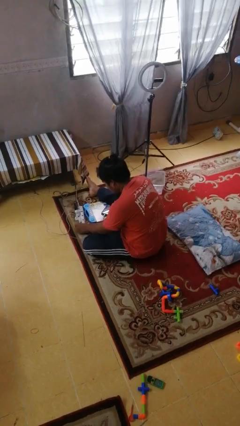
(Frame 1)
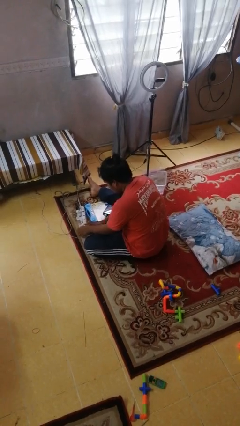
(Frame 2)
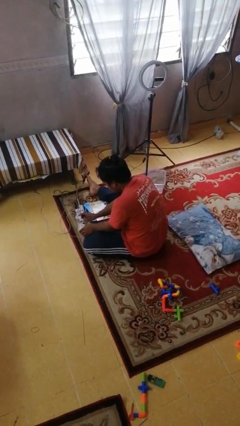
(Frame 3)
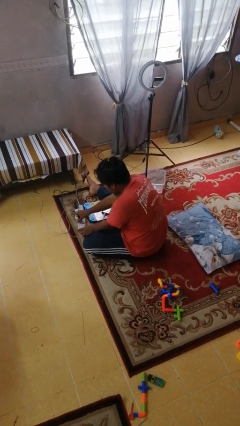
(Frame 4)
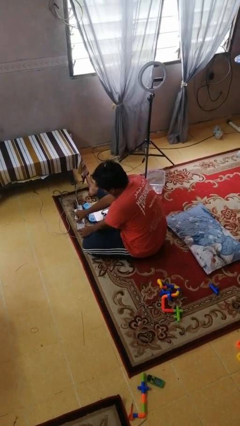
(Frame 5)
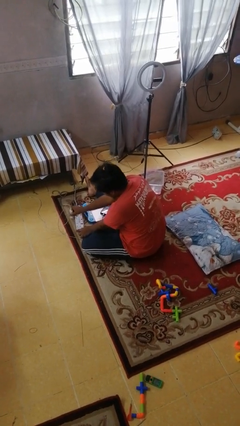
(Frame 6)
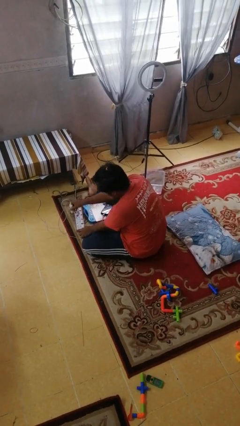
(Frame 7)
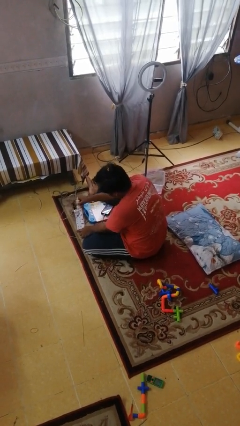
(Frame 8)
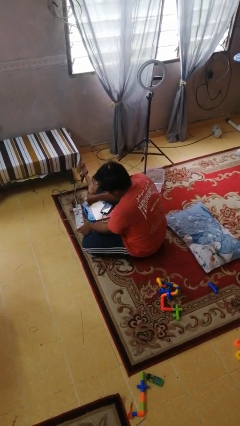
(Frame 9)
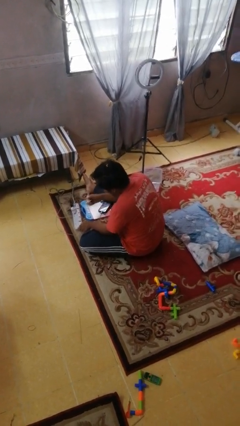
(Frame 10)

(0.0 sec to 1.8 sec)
person unplugs from electrical socket

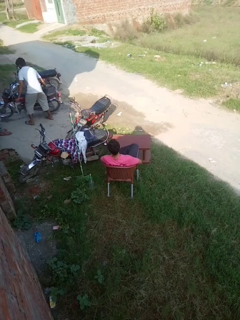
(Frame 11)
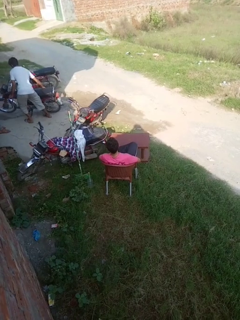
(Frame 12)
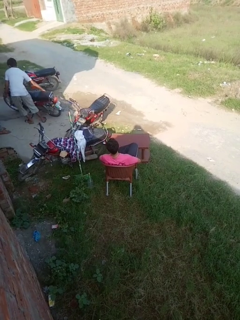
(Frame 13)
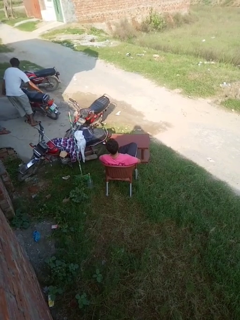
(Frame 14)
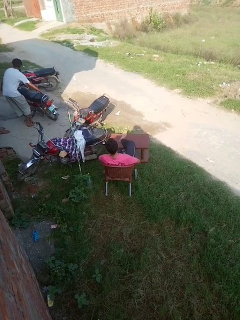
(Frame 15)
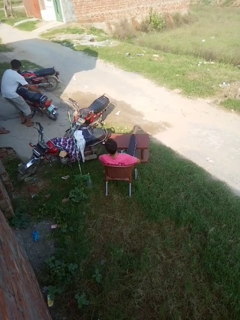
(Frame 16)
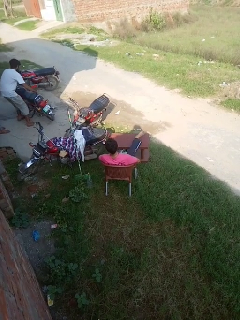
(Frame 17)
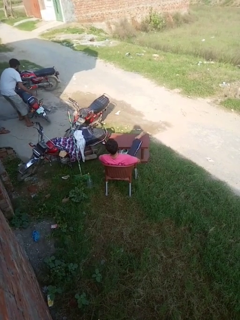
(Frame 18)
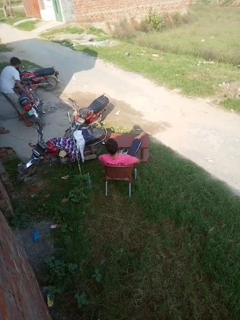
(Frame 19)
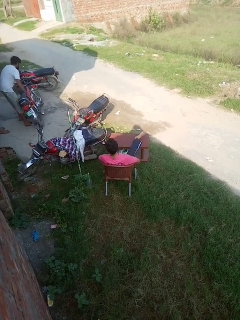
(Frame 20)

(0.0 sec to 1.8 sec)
person puts feet up

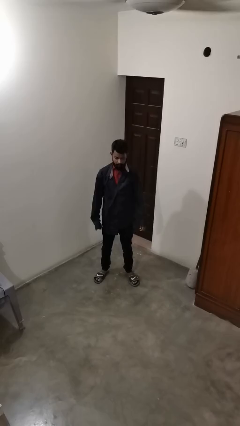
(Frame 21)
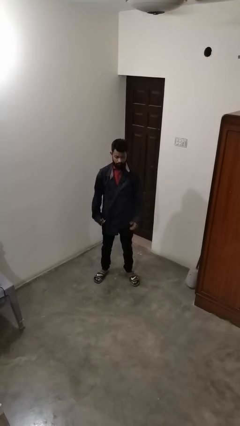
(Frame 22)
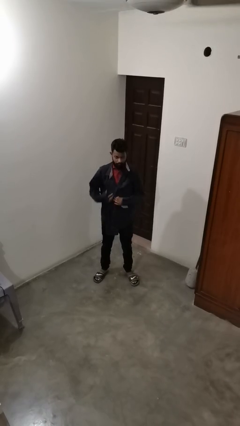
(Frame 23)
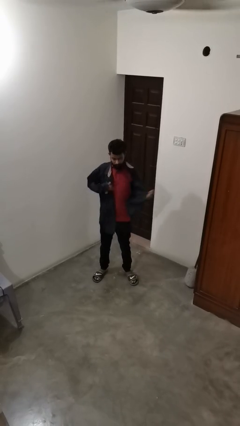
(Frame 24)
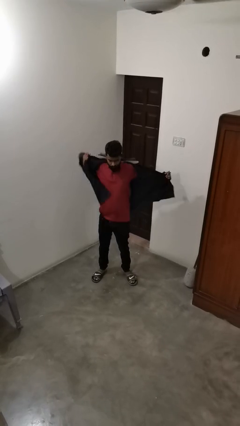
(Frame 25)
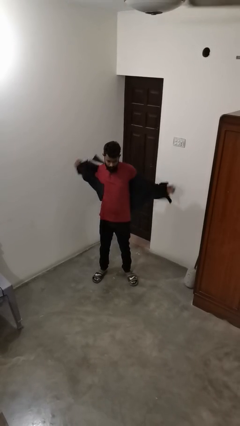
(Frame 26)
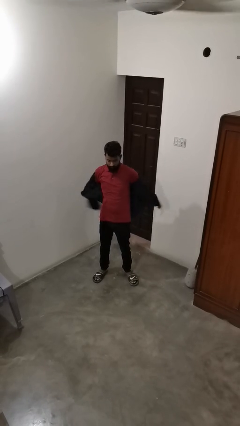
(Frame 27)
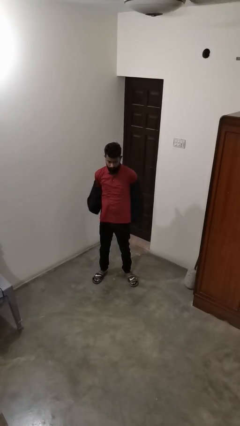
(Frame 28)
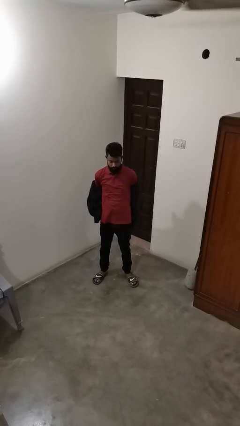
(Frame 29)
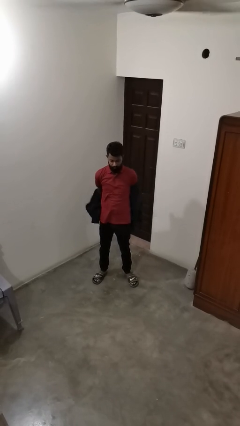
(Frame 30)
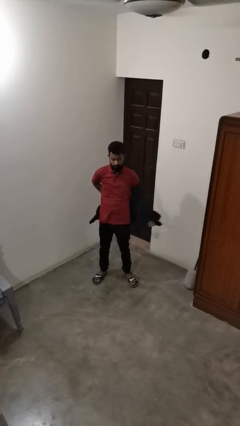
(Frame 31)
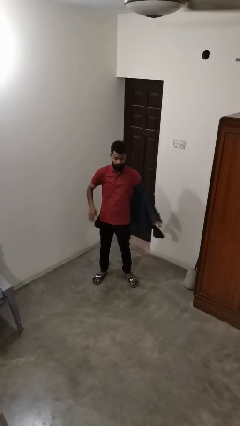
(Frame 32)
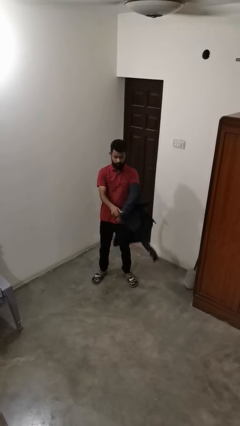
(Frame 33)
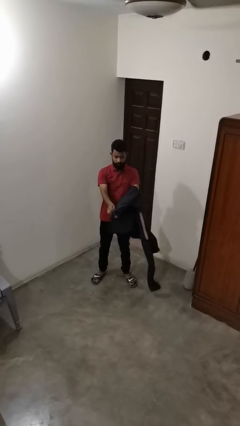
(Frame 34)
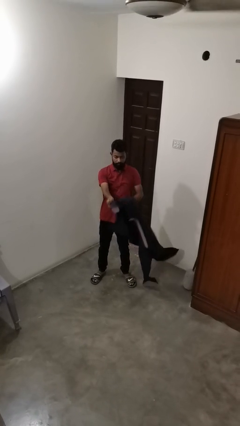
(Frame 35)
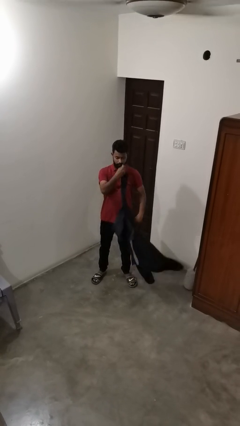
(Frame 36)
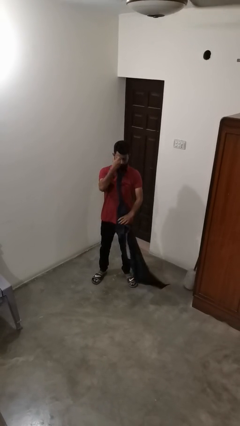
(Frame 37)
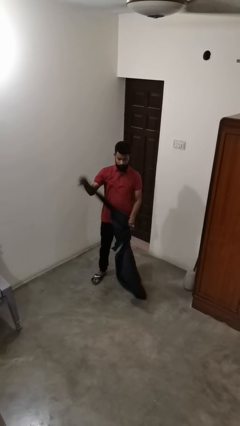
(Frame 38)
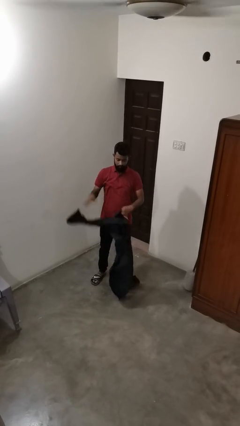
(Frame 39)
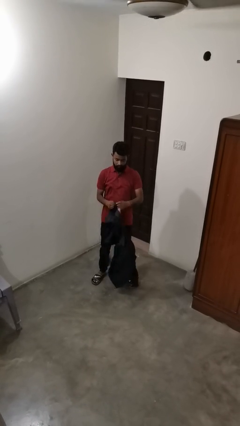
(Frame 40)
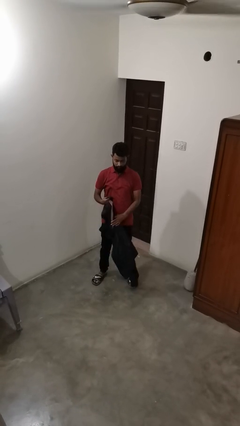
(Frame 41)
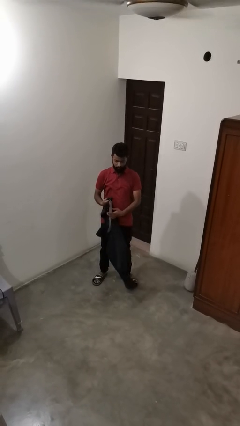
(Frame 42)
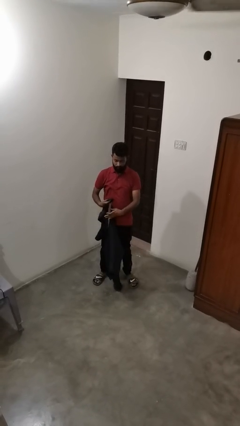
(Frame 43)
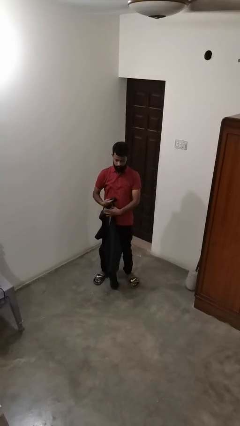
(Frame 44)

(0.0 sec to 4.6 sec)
person takes off shirt

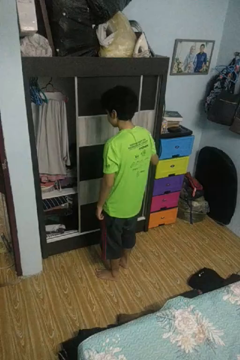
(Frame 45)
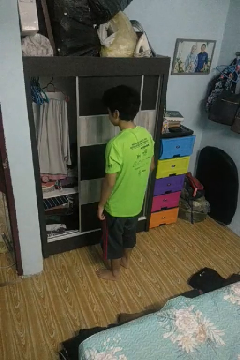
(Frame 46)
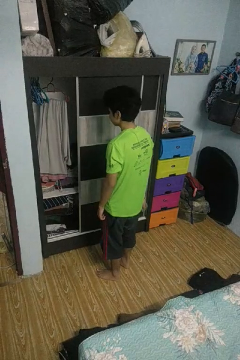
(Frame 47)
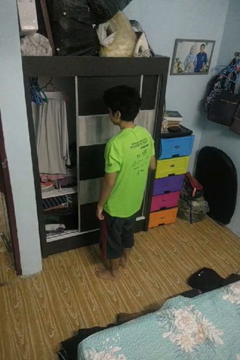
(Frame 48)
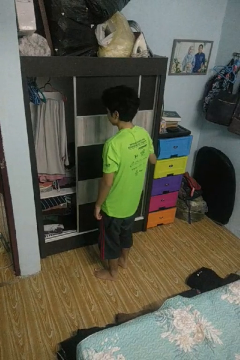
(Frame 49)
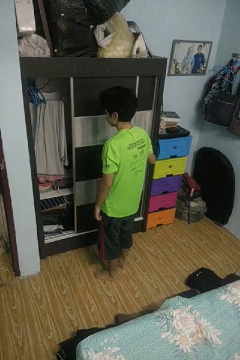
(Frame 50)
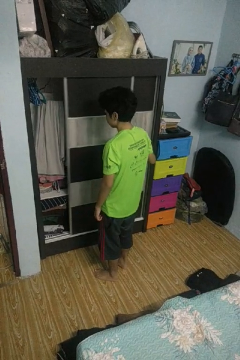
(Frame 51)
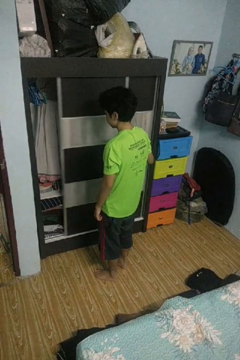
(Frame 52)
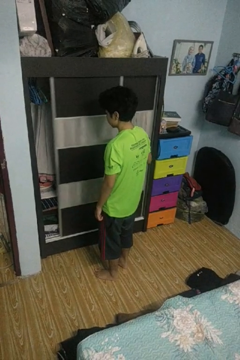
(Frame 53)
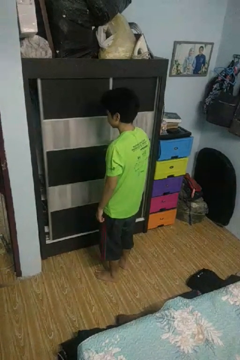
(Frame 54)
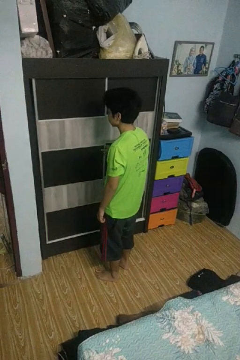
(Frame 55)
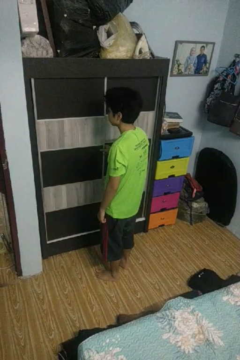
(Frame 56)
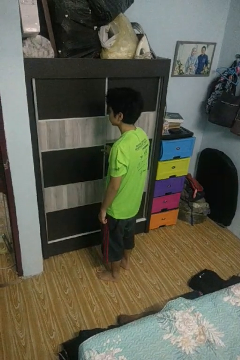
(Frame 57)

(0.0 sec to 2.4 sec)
person closes closet door

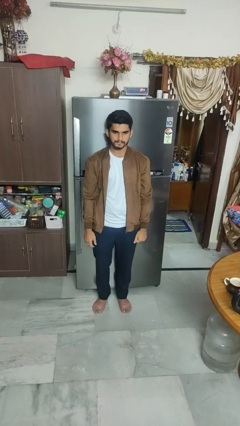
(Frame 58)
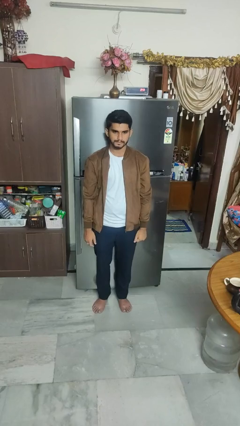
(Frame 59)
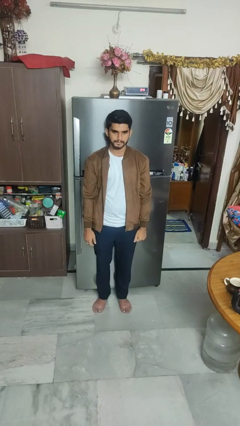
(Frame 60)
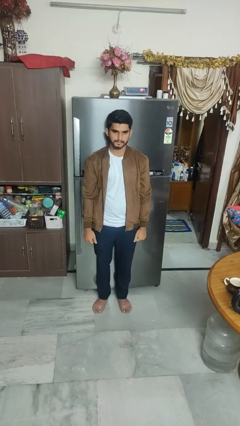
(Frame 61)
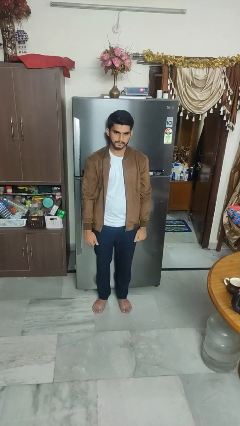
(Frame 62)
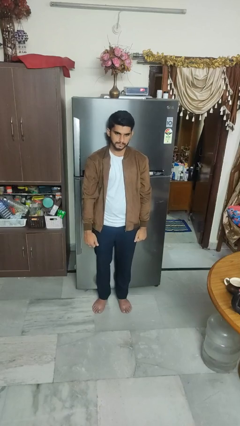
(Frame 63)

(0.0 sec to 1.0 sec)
person gestures hang loose

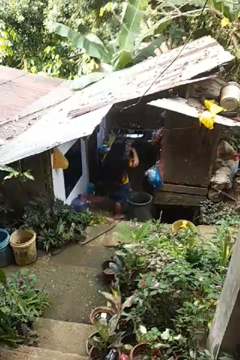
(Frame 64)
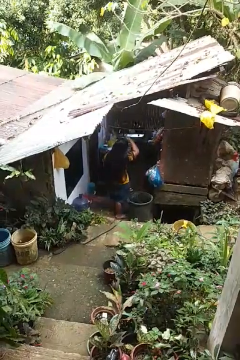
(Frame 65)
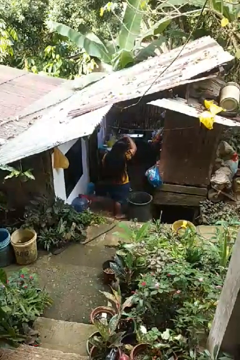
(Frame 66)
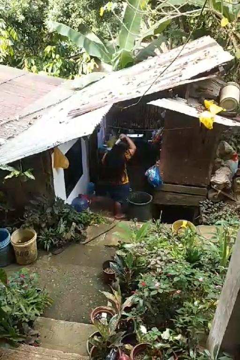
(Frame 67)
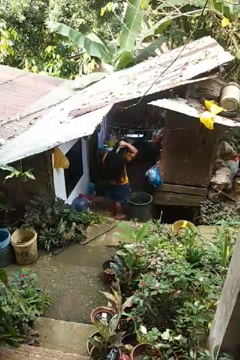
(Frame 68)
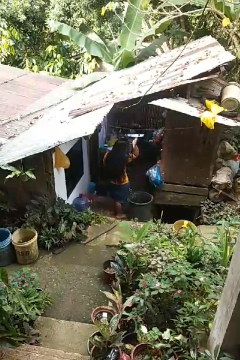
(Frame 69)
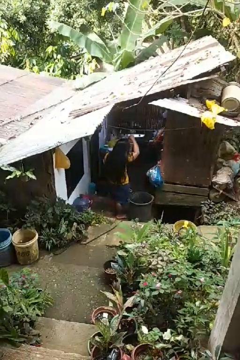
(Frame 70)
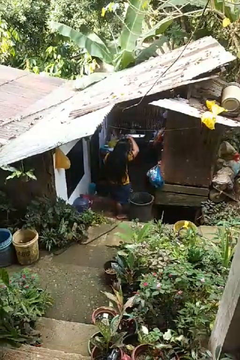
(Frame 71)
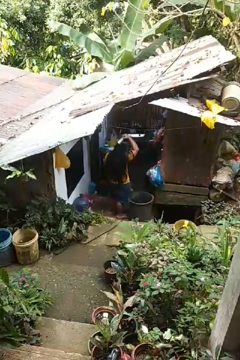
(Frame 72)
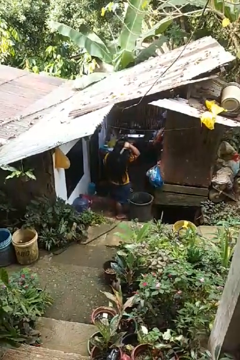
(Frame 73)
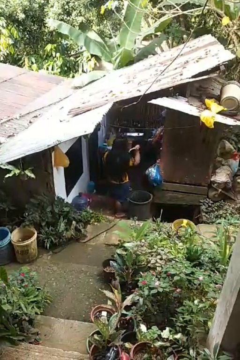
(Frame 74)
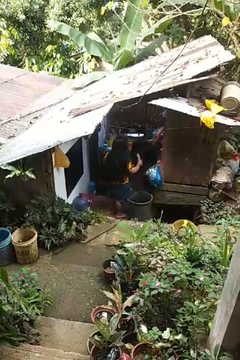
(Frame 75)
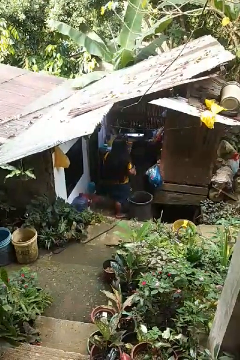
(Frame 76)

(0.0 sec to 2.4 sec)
person brushes hair

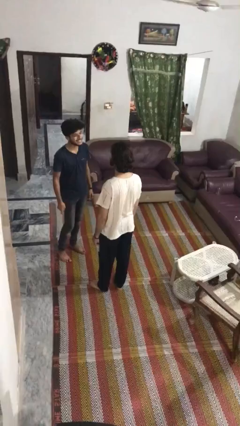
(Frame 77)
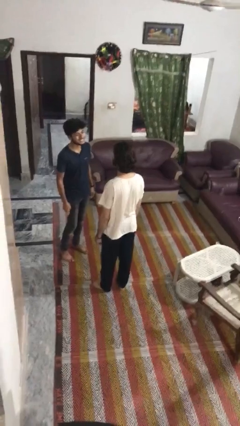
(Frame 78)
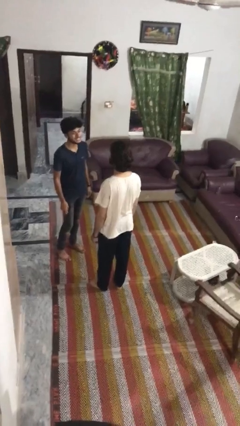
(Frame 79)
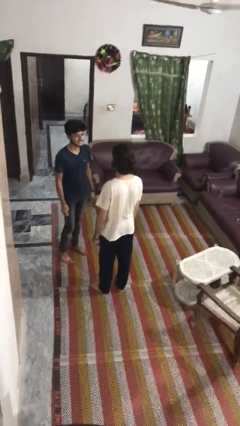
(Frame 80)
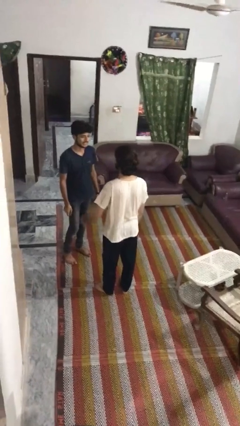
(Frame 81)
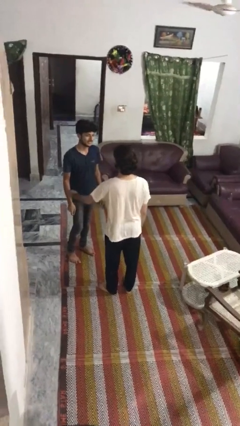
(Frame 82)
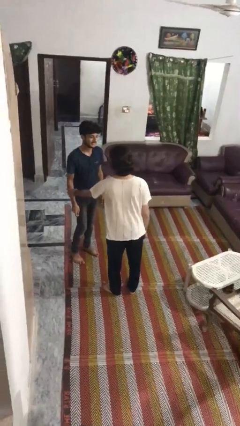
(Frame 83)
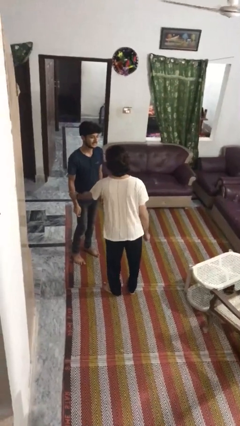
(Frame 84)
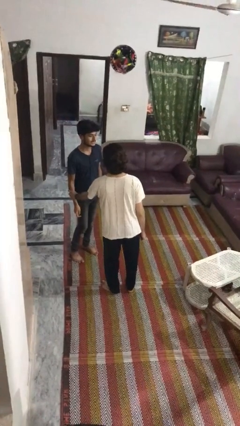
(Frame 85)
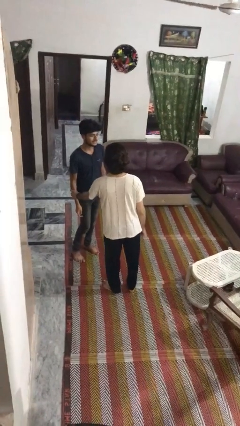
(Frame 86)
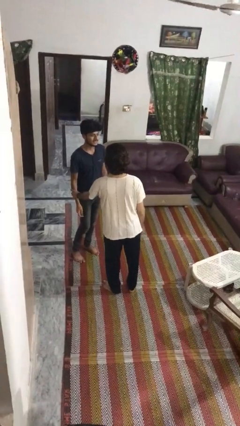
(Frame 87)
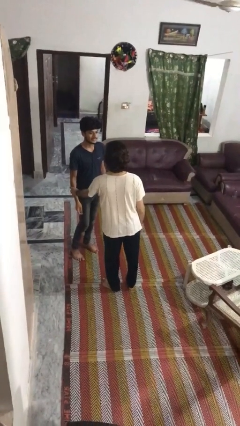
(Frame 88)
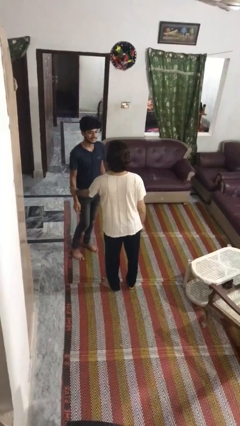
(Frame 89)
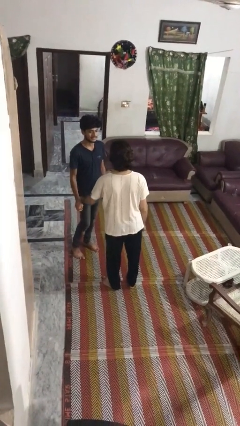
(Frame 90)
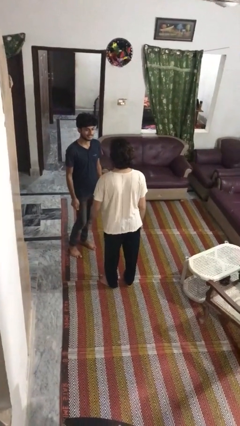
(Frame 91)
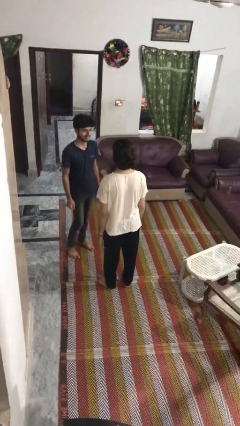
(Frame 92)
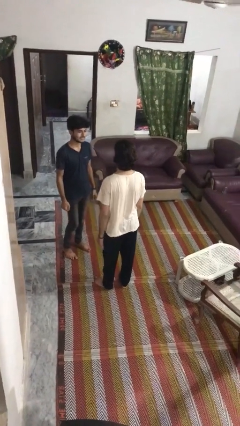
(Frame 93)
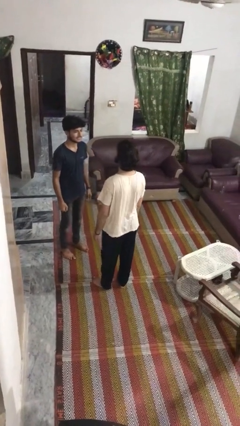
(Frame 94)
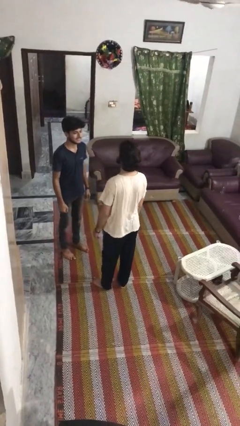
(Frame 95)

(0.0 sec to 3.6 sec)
person grabs person by forearm

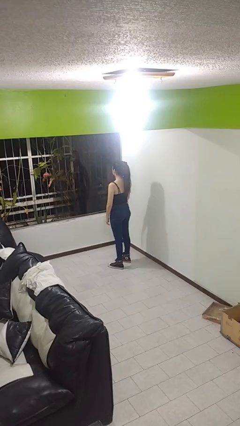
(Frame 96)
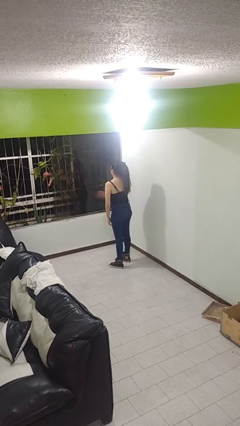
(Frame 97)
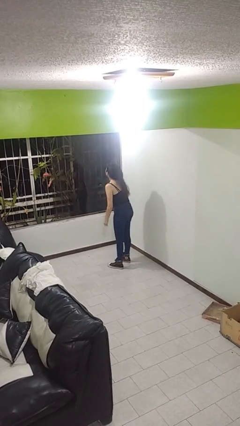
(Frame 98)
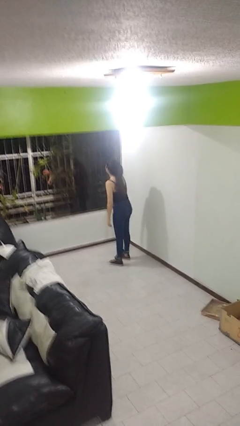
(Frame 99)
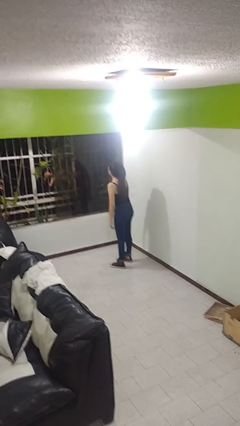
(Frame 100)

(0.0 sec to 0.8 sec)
person swats bug
